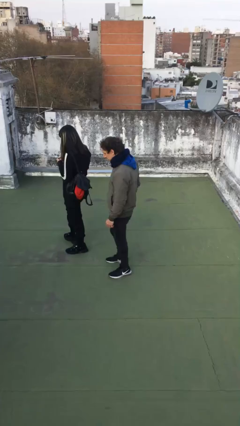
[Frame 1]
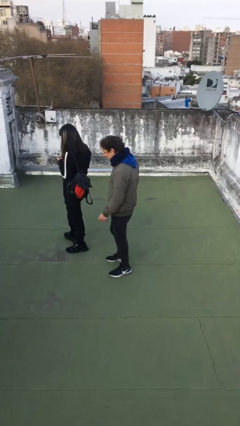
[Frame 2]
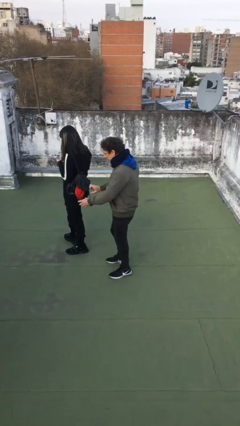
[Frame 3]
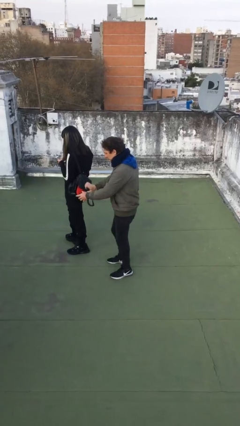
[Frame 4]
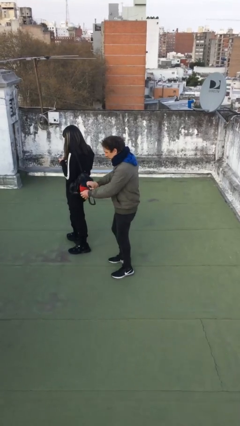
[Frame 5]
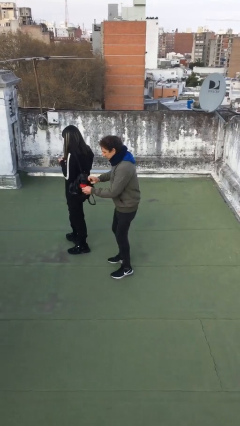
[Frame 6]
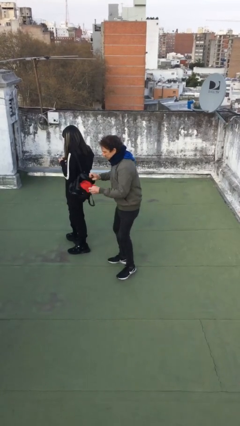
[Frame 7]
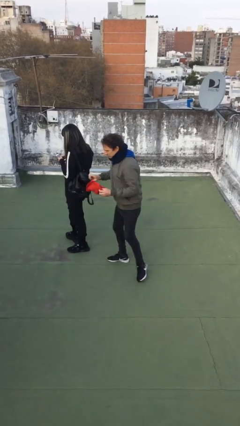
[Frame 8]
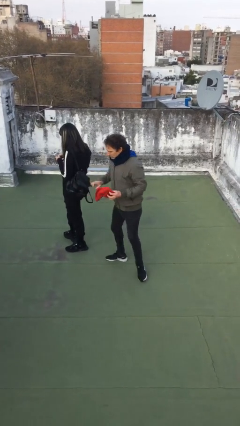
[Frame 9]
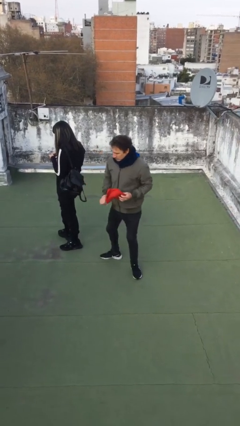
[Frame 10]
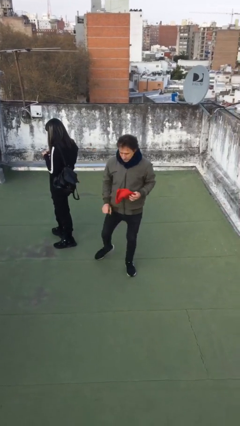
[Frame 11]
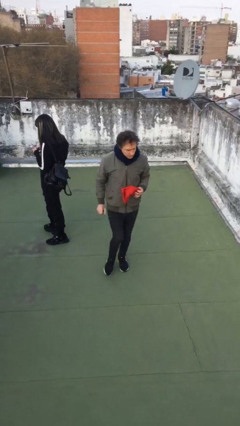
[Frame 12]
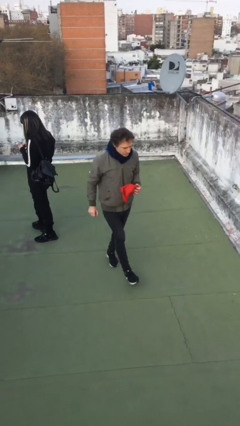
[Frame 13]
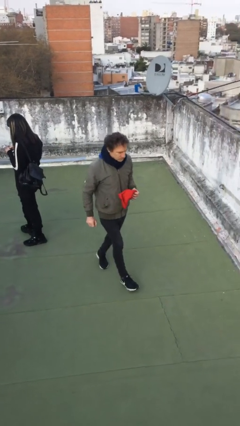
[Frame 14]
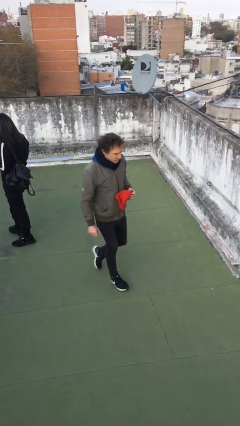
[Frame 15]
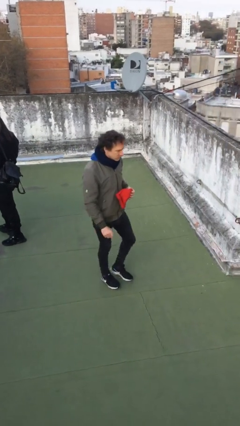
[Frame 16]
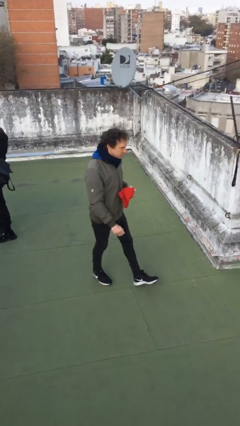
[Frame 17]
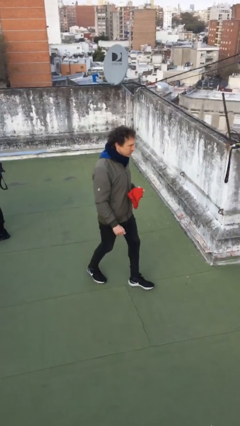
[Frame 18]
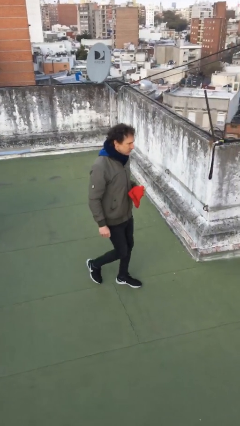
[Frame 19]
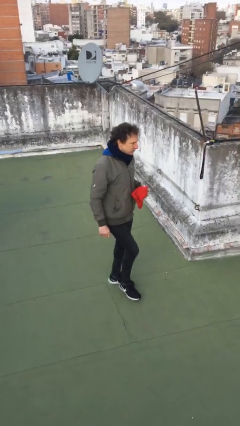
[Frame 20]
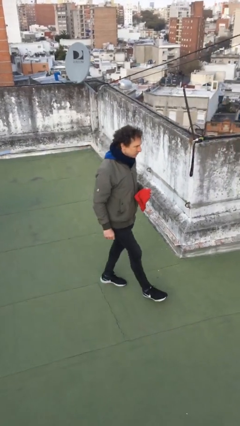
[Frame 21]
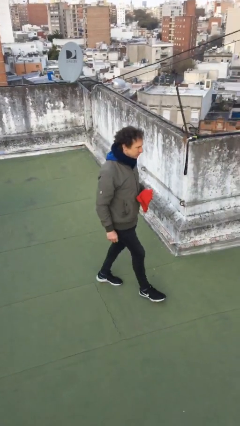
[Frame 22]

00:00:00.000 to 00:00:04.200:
person steals object from person

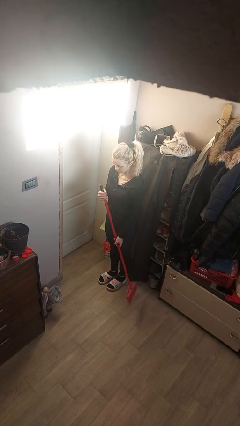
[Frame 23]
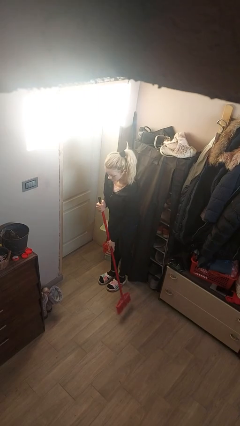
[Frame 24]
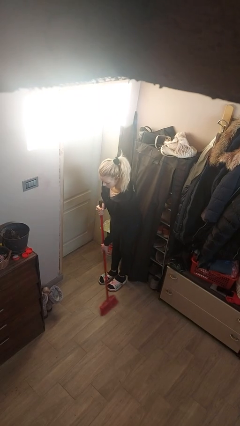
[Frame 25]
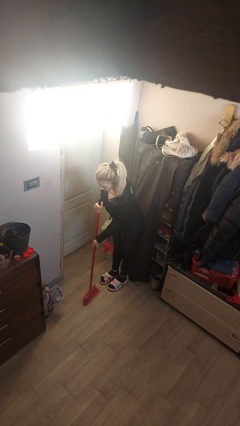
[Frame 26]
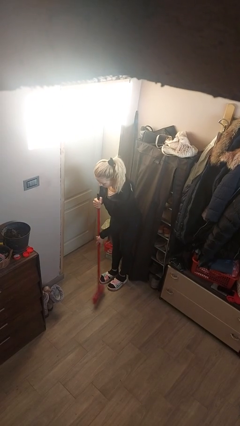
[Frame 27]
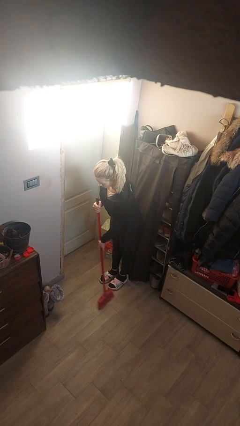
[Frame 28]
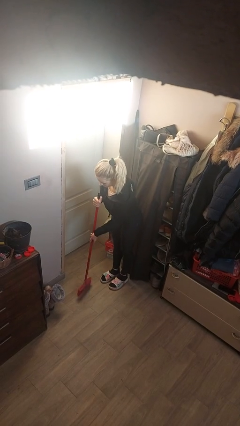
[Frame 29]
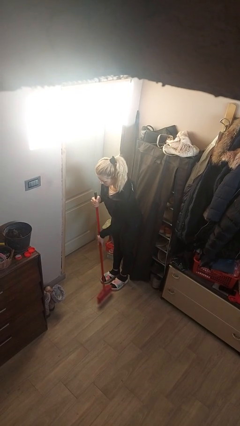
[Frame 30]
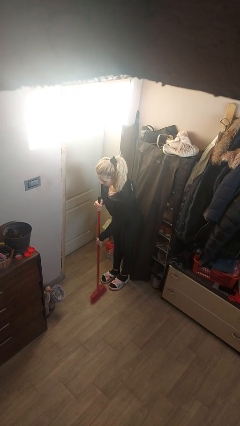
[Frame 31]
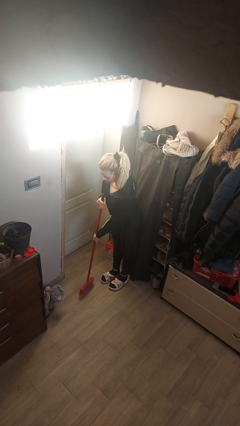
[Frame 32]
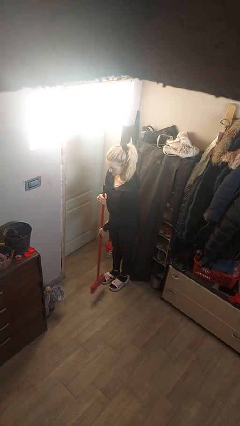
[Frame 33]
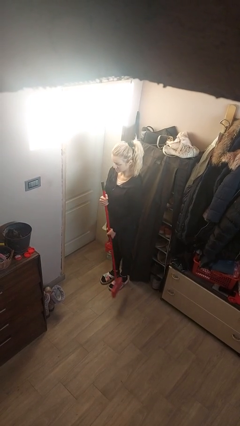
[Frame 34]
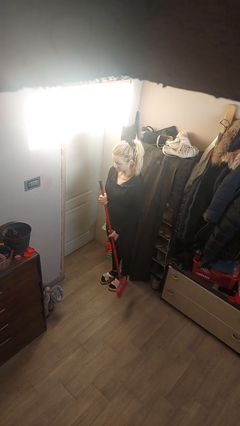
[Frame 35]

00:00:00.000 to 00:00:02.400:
person sweeps floor

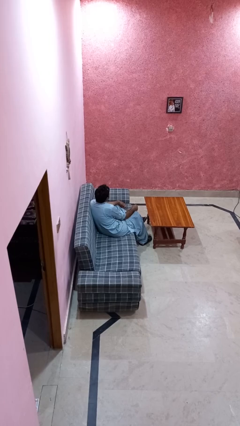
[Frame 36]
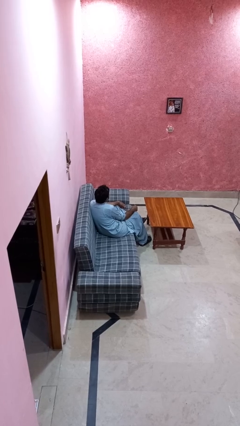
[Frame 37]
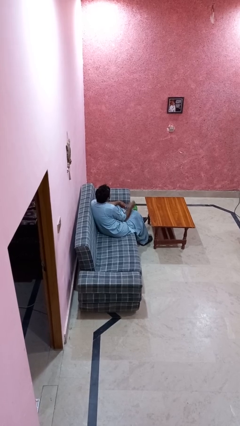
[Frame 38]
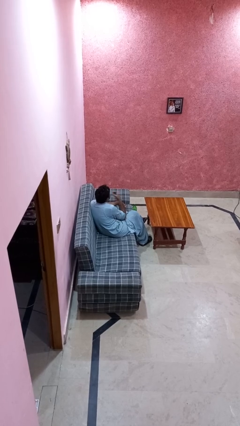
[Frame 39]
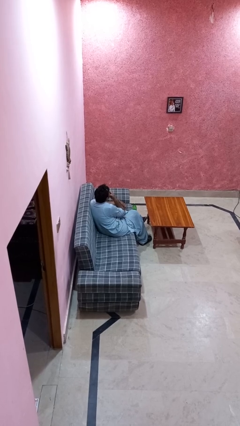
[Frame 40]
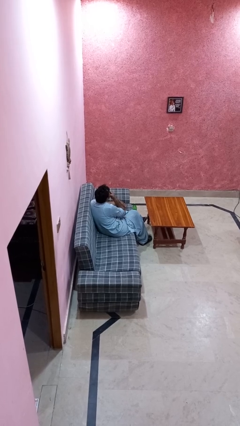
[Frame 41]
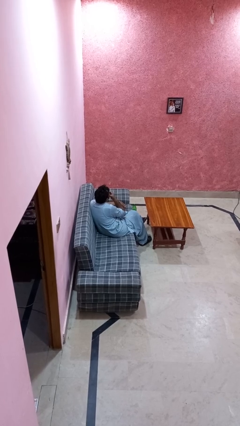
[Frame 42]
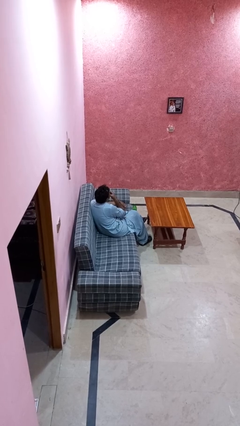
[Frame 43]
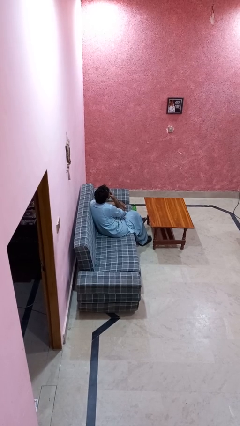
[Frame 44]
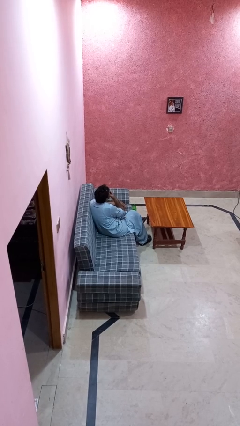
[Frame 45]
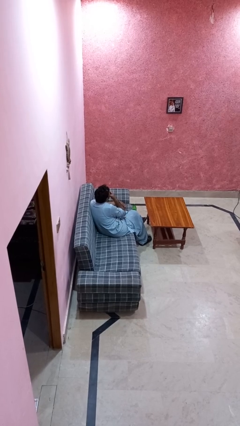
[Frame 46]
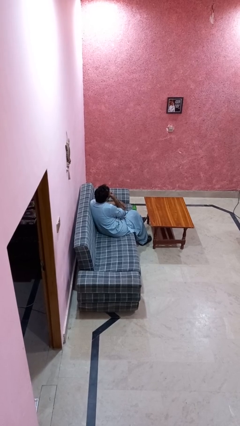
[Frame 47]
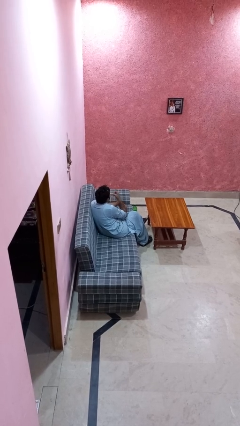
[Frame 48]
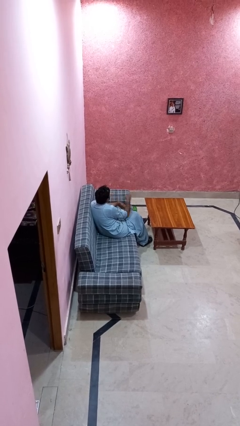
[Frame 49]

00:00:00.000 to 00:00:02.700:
person strokes chin

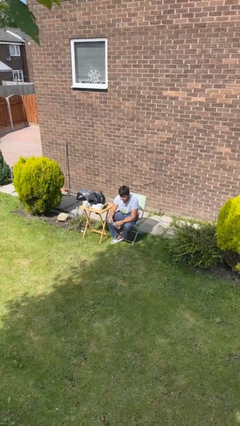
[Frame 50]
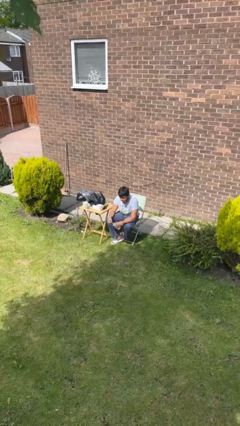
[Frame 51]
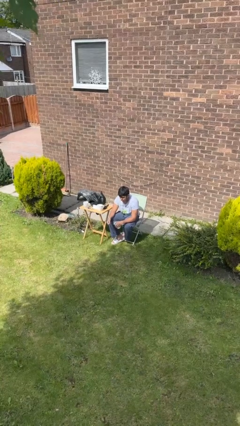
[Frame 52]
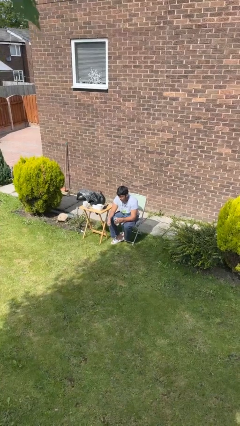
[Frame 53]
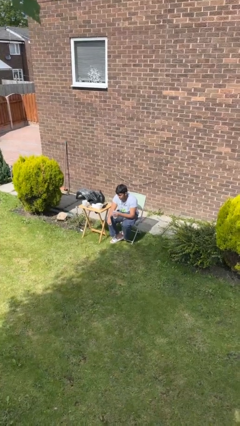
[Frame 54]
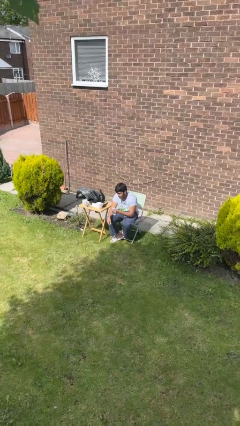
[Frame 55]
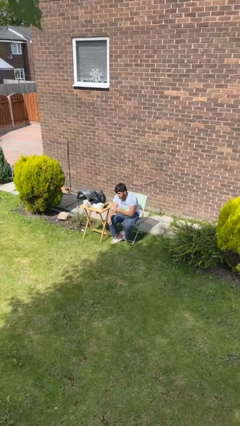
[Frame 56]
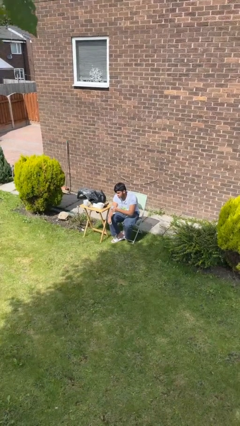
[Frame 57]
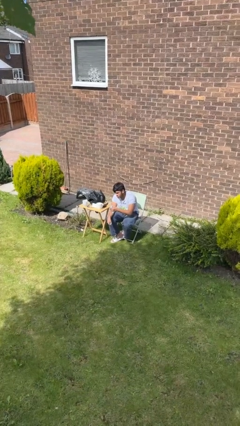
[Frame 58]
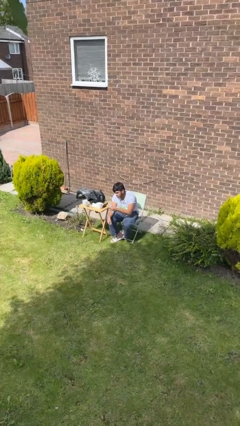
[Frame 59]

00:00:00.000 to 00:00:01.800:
person unscrews lid from bottle

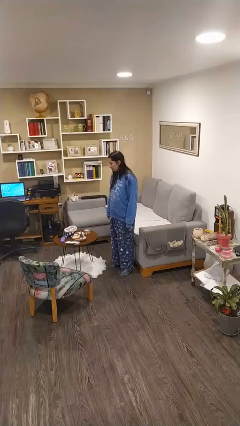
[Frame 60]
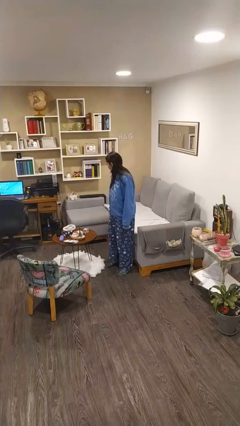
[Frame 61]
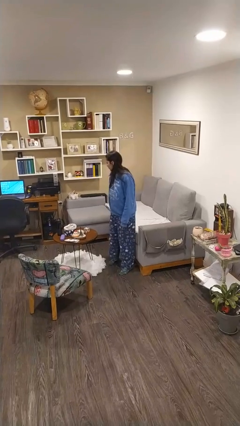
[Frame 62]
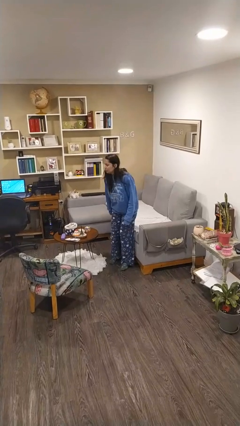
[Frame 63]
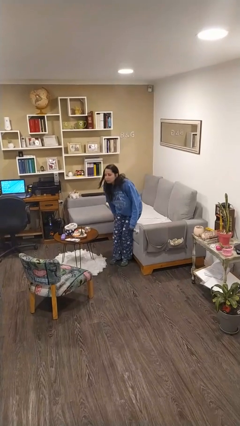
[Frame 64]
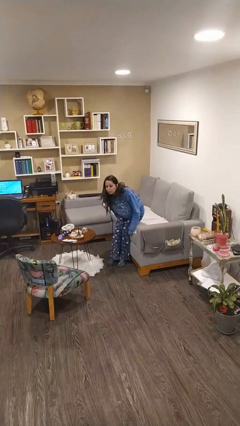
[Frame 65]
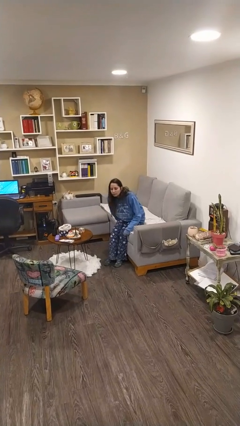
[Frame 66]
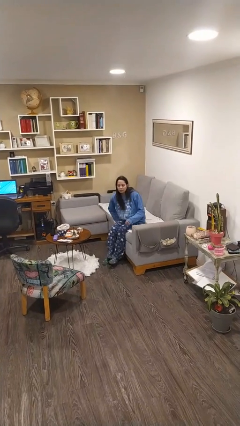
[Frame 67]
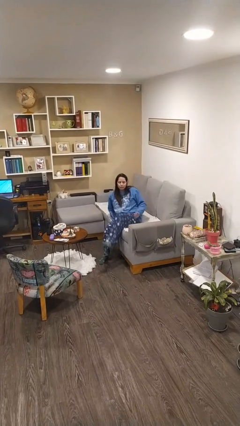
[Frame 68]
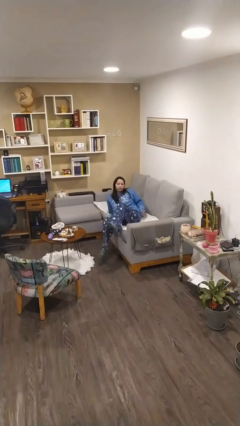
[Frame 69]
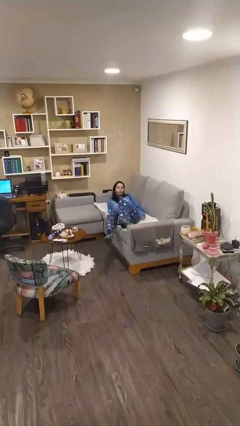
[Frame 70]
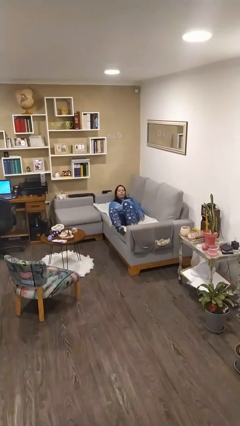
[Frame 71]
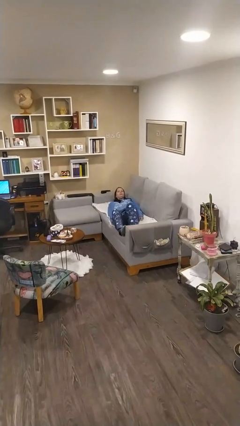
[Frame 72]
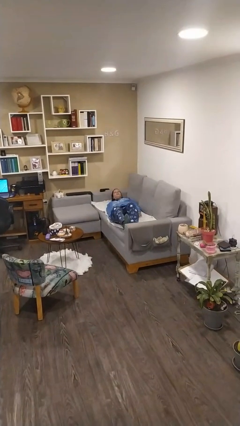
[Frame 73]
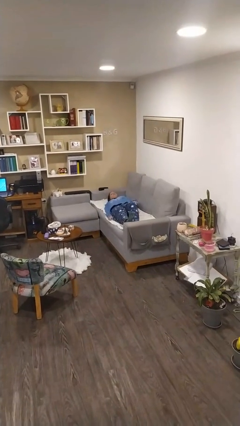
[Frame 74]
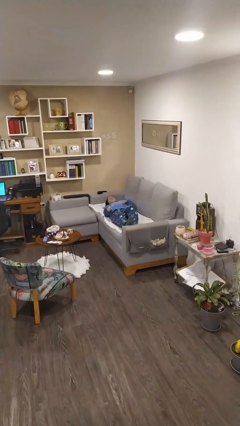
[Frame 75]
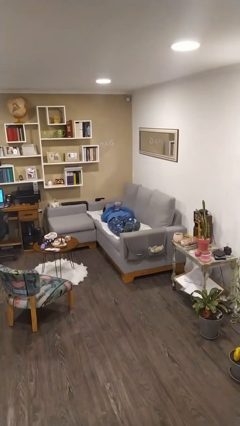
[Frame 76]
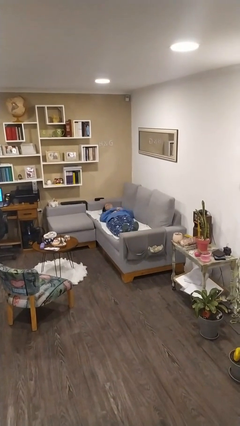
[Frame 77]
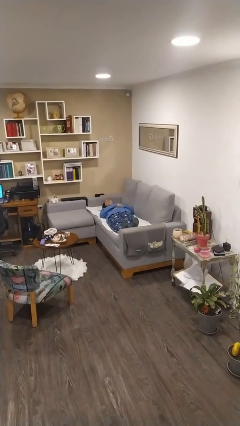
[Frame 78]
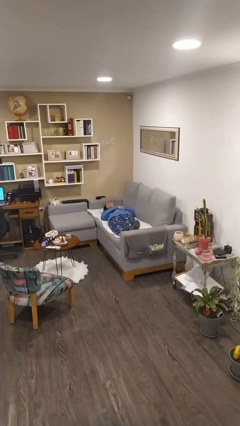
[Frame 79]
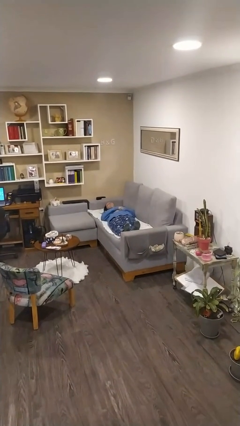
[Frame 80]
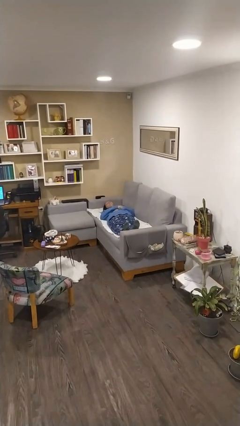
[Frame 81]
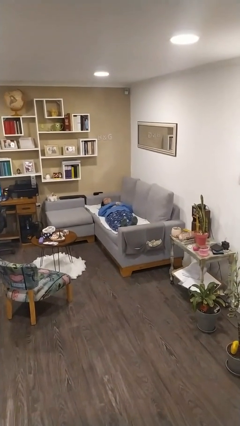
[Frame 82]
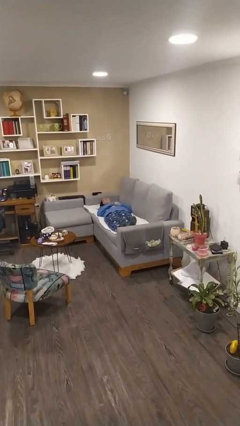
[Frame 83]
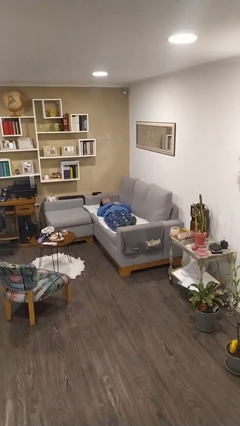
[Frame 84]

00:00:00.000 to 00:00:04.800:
person lies down on couch

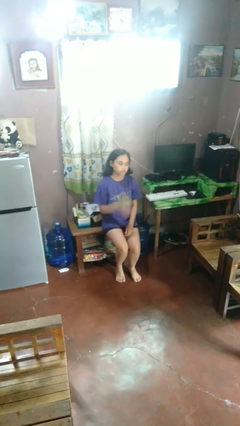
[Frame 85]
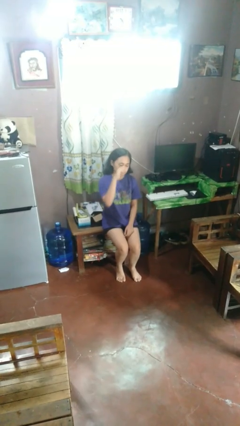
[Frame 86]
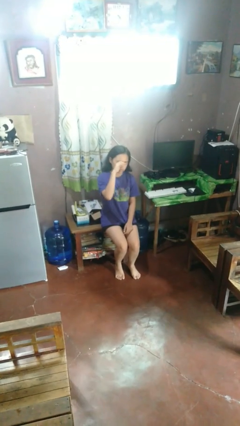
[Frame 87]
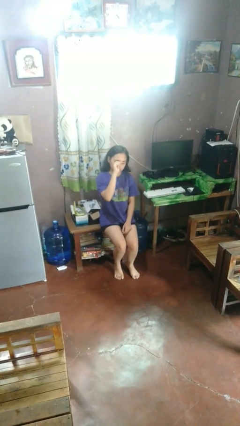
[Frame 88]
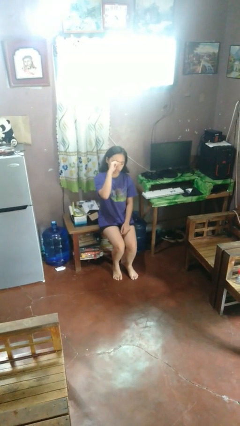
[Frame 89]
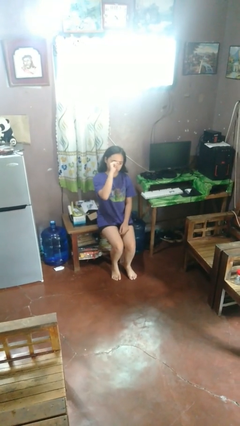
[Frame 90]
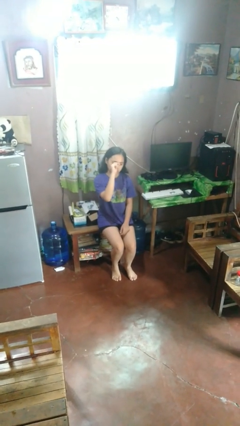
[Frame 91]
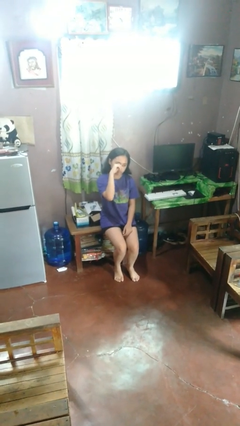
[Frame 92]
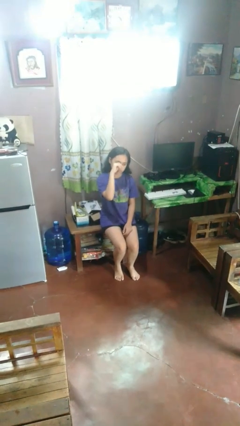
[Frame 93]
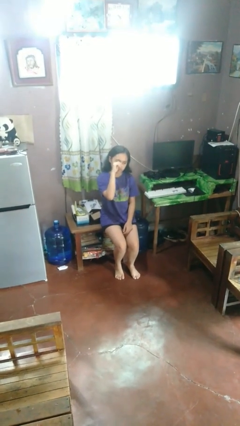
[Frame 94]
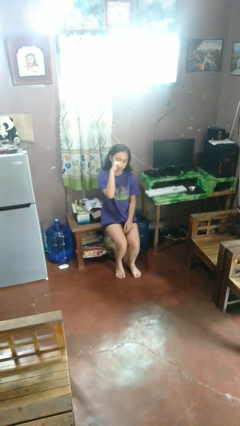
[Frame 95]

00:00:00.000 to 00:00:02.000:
person rubs eyes
